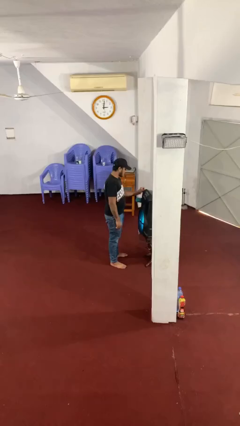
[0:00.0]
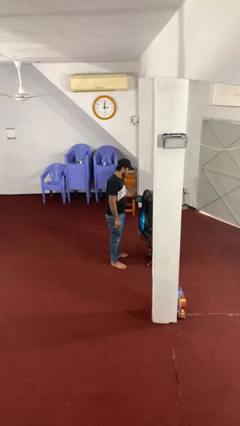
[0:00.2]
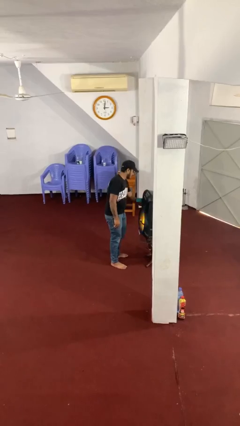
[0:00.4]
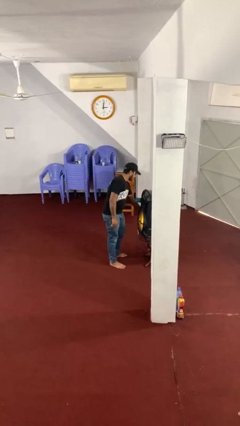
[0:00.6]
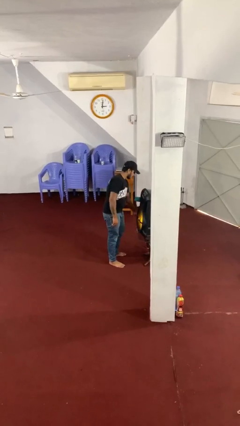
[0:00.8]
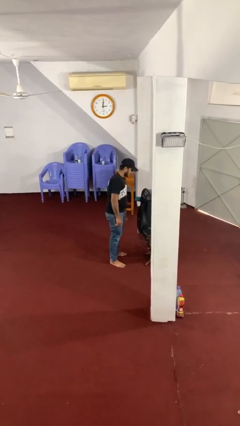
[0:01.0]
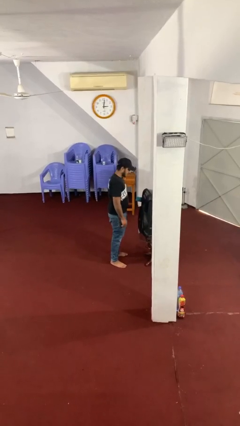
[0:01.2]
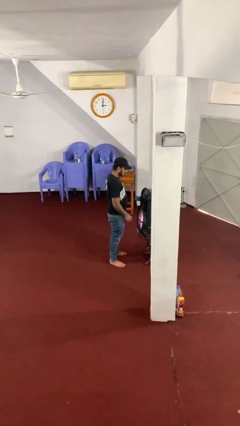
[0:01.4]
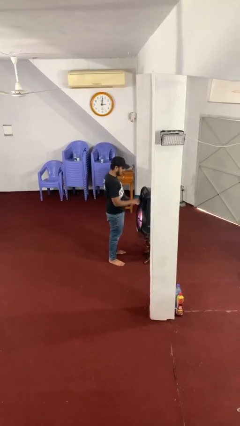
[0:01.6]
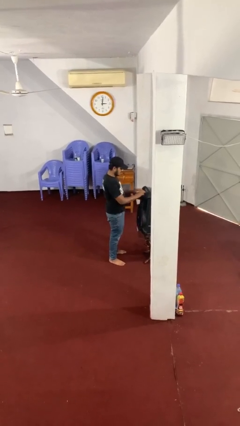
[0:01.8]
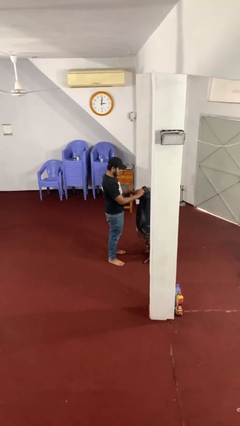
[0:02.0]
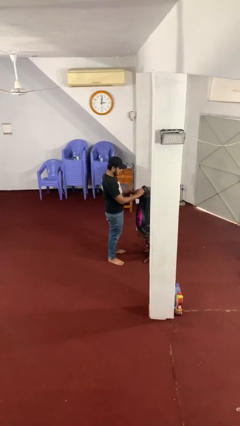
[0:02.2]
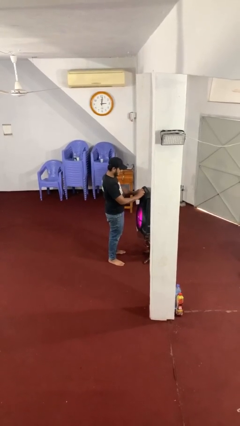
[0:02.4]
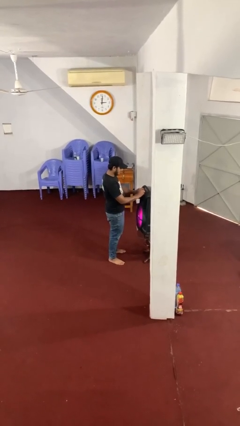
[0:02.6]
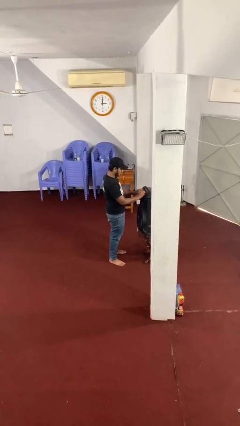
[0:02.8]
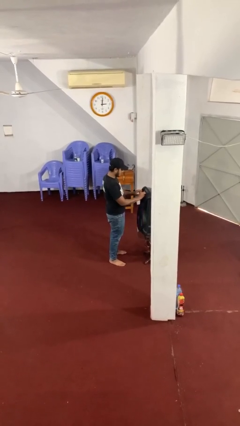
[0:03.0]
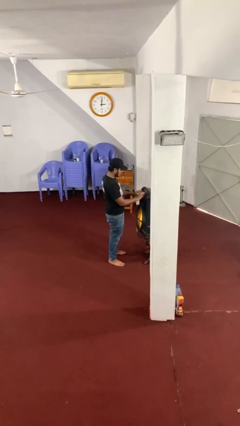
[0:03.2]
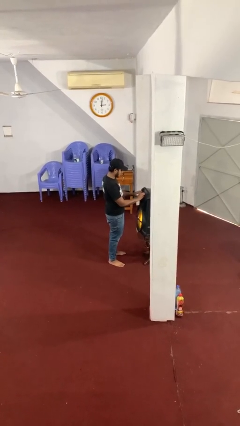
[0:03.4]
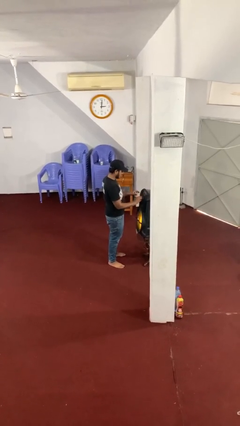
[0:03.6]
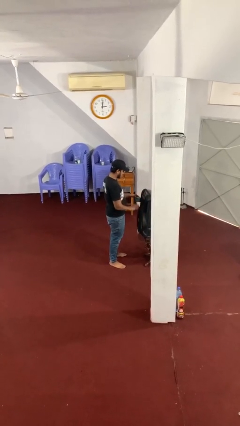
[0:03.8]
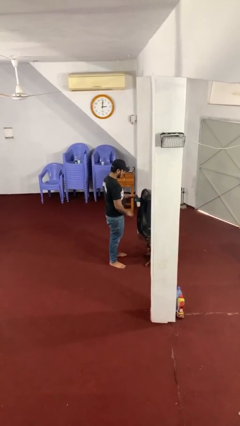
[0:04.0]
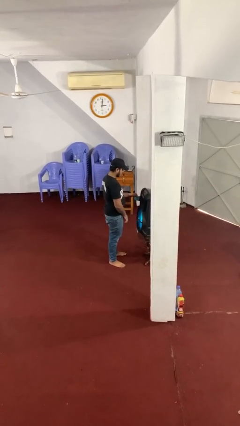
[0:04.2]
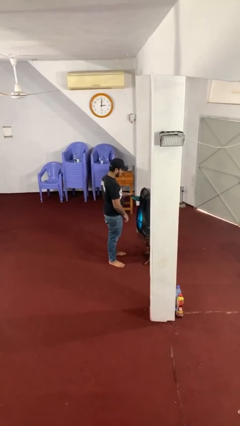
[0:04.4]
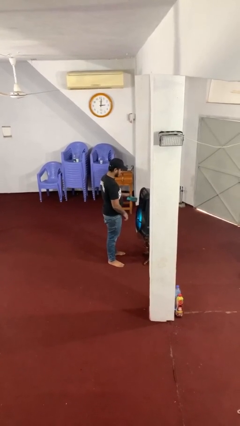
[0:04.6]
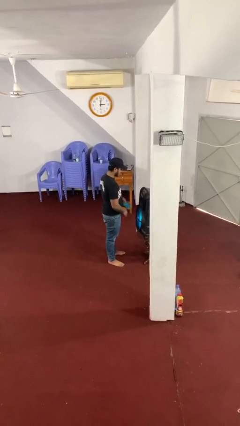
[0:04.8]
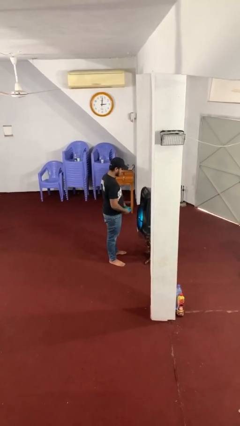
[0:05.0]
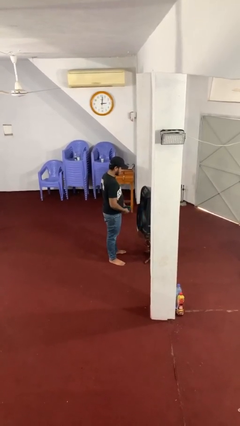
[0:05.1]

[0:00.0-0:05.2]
person purchases from machine

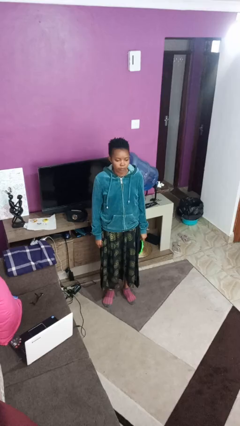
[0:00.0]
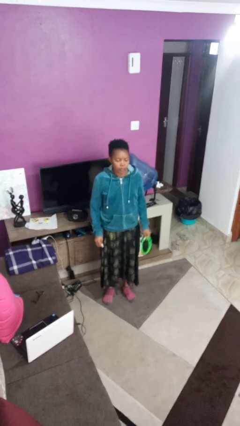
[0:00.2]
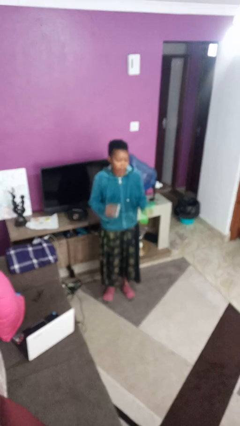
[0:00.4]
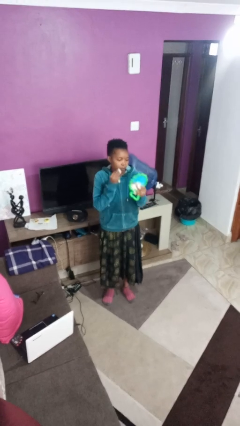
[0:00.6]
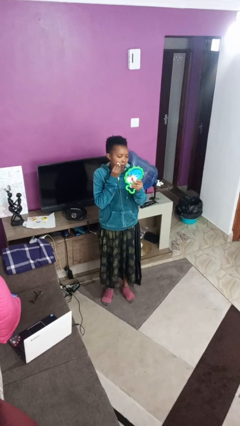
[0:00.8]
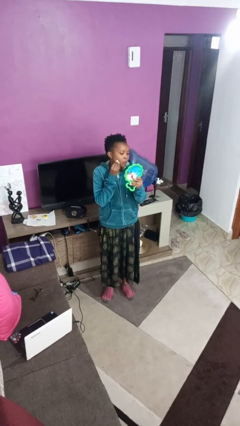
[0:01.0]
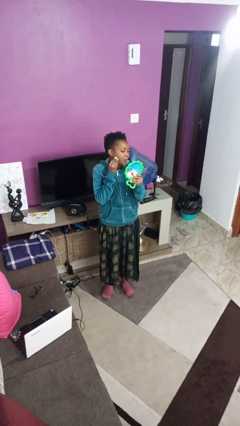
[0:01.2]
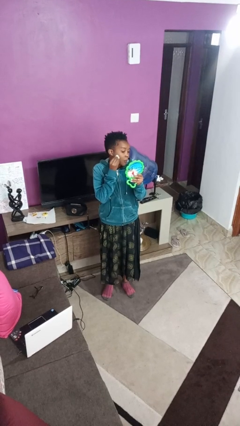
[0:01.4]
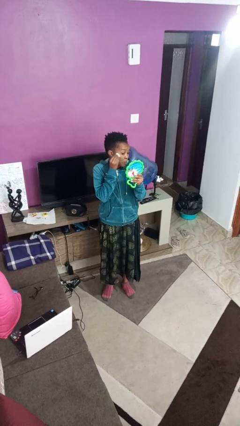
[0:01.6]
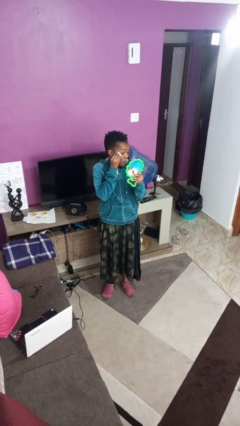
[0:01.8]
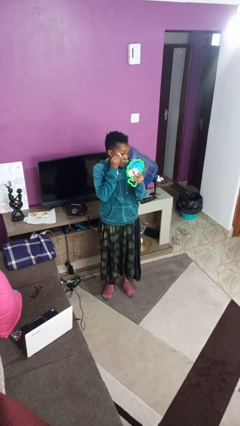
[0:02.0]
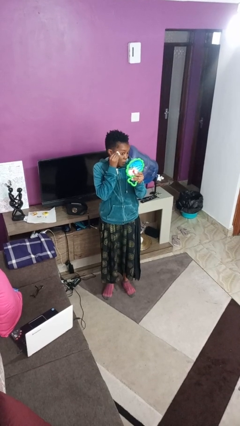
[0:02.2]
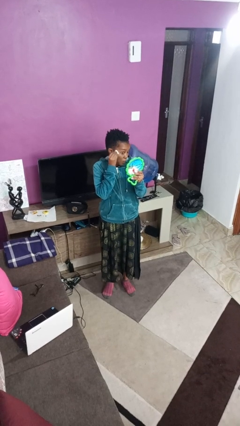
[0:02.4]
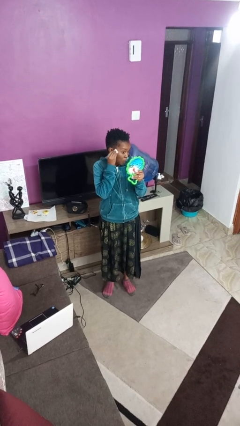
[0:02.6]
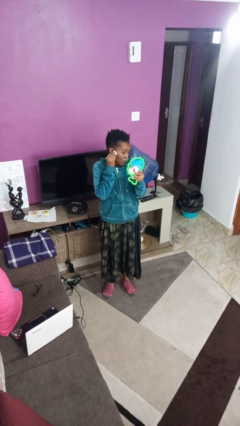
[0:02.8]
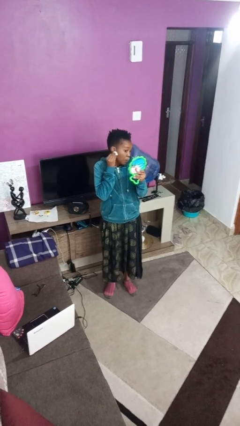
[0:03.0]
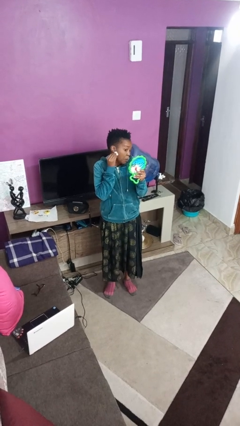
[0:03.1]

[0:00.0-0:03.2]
person applies foundation makeup

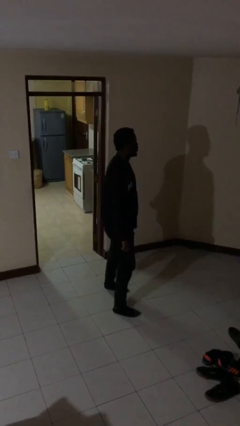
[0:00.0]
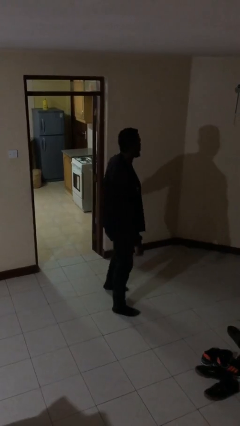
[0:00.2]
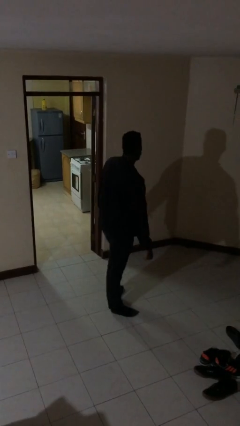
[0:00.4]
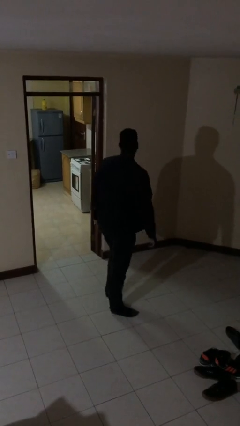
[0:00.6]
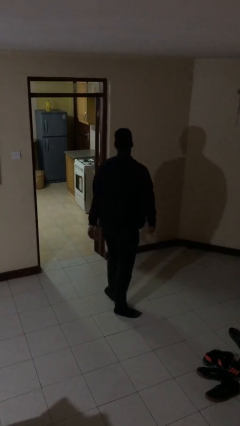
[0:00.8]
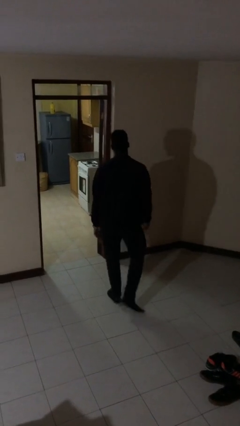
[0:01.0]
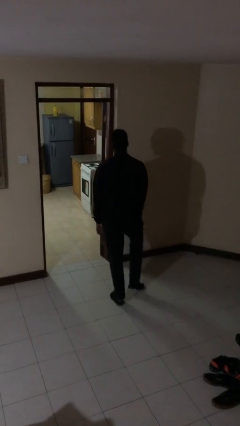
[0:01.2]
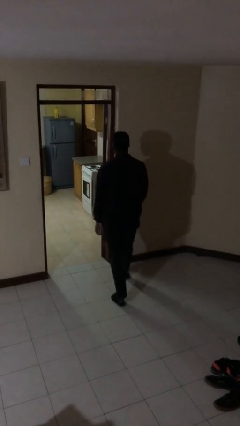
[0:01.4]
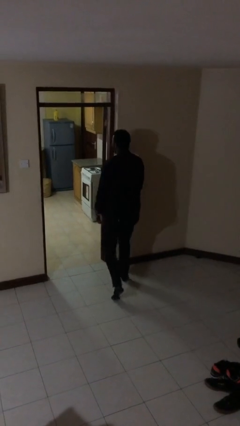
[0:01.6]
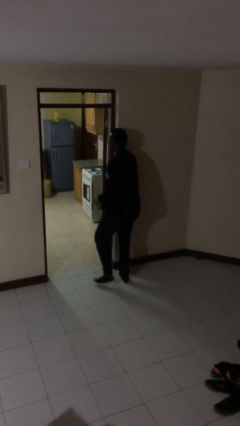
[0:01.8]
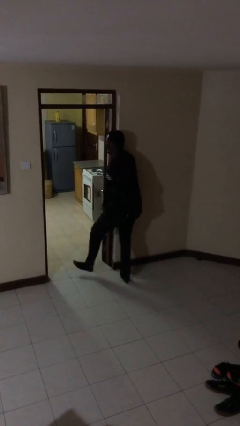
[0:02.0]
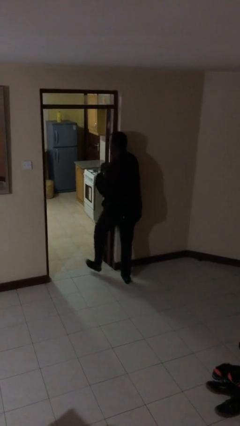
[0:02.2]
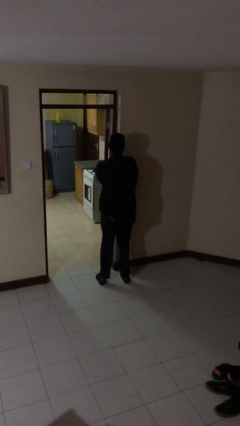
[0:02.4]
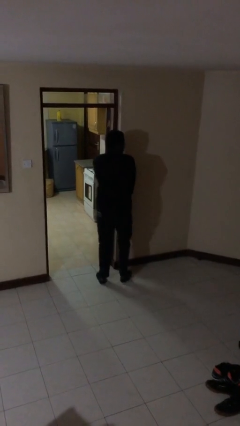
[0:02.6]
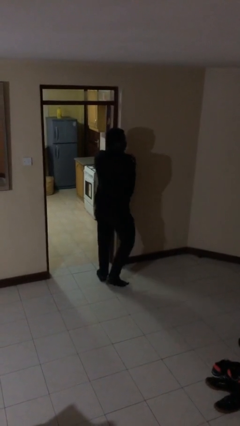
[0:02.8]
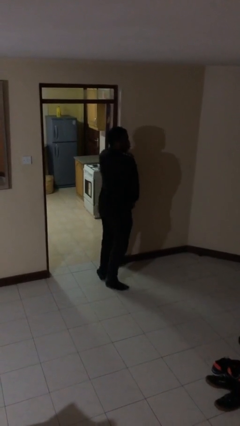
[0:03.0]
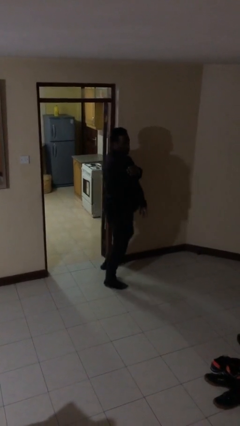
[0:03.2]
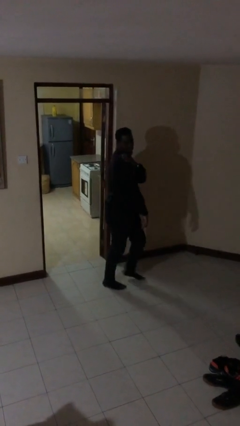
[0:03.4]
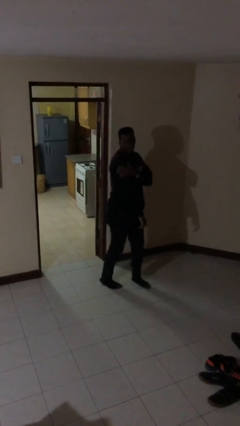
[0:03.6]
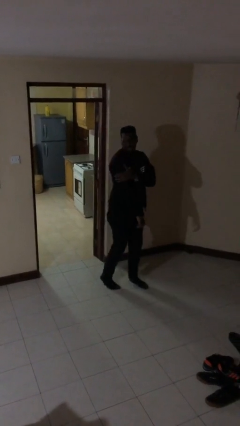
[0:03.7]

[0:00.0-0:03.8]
person bumps into wall

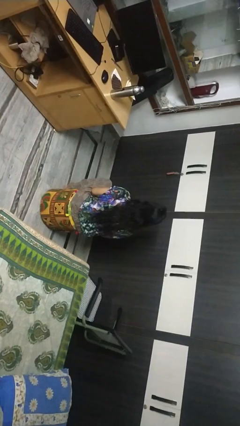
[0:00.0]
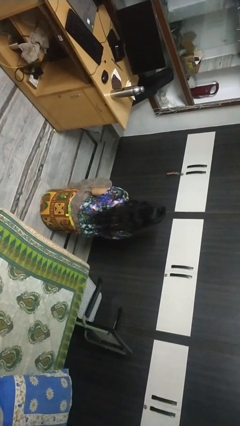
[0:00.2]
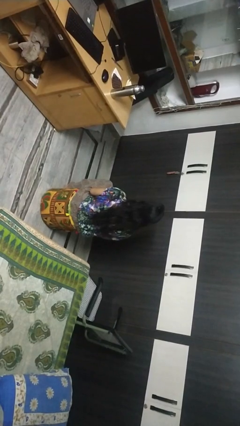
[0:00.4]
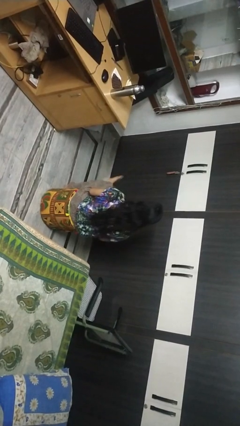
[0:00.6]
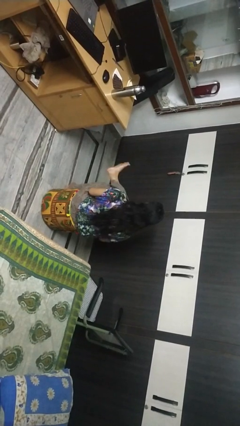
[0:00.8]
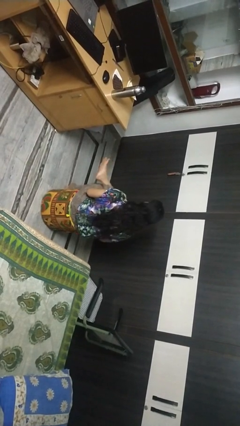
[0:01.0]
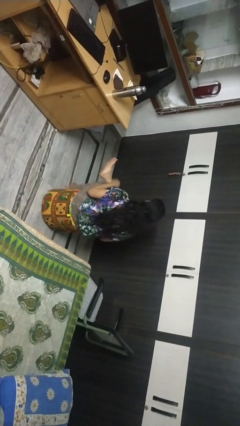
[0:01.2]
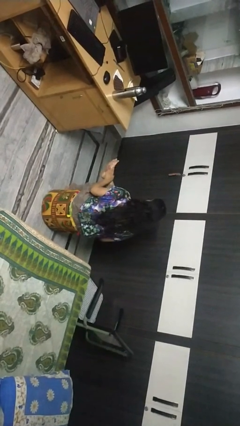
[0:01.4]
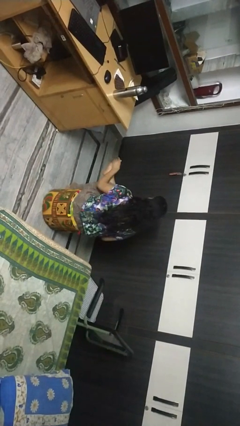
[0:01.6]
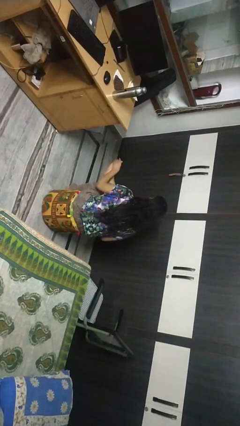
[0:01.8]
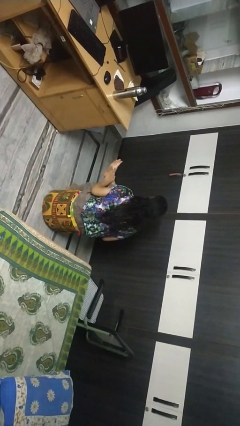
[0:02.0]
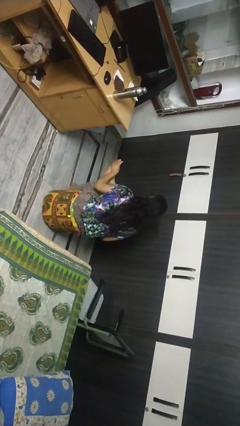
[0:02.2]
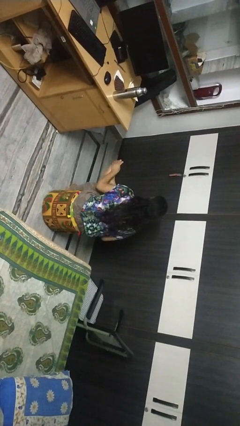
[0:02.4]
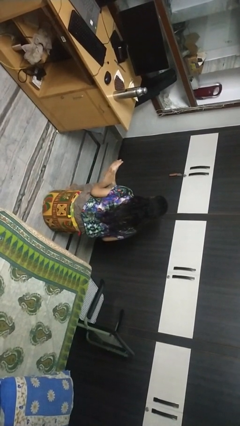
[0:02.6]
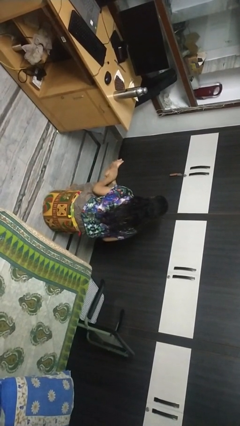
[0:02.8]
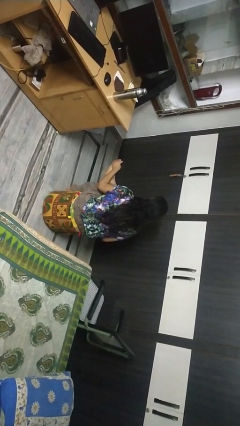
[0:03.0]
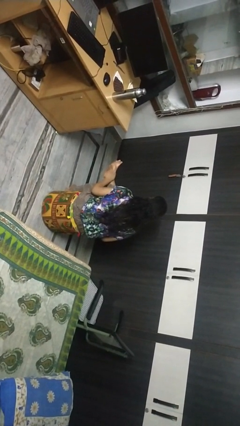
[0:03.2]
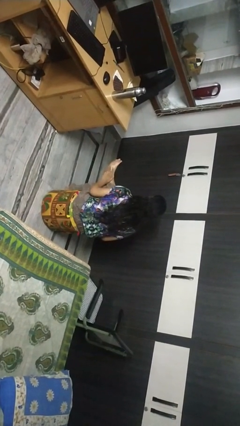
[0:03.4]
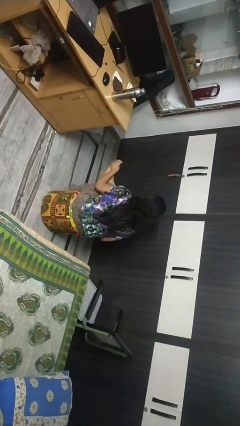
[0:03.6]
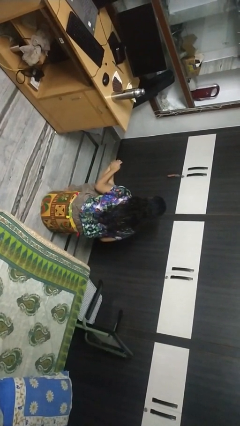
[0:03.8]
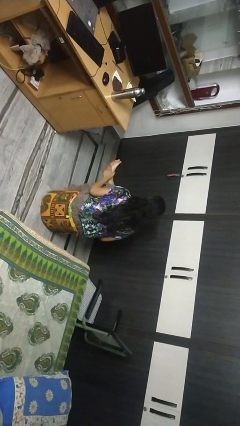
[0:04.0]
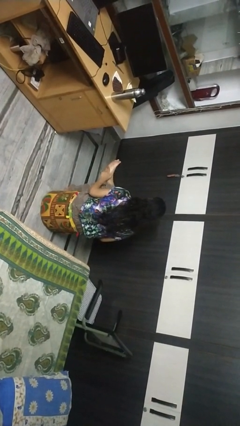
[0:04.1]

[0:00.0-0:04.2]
person rubs foot

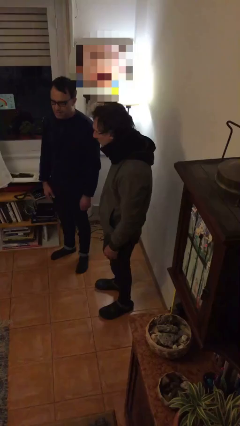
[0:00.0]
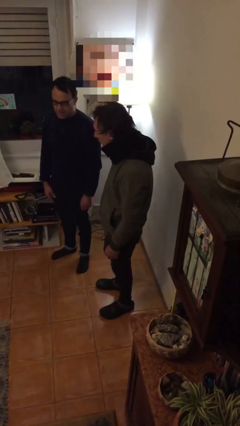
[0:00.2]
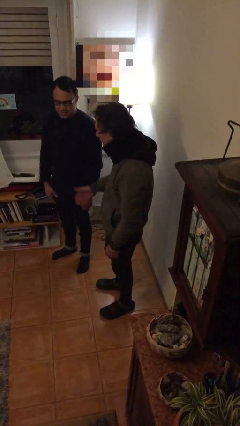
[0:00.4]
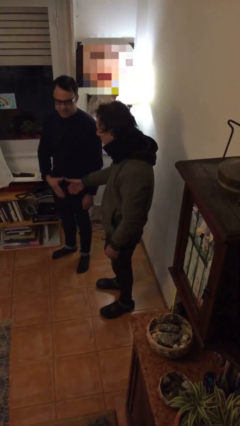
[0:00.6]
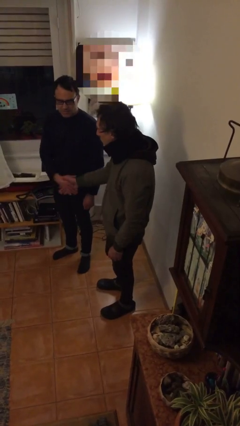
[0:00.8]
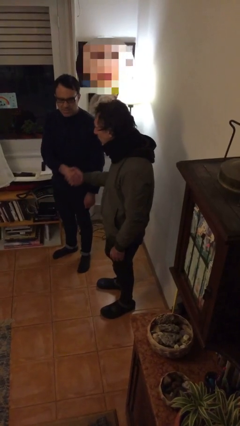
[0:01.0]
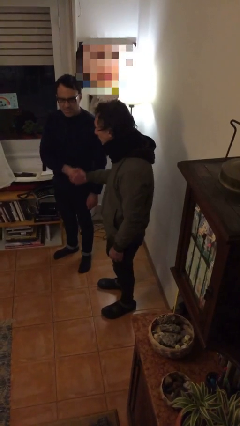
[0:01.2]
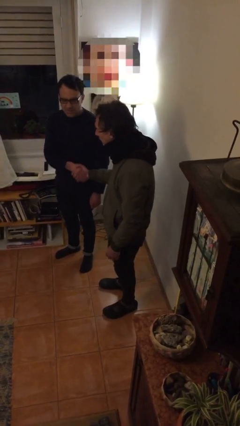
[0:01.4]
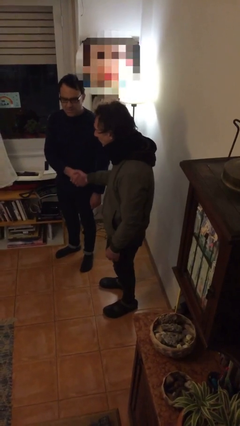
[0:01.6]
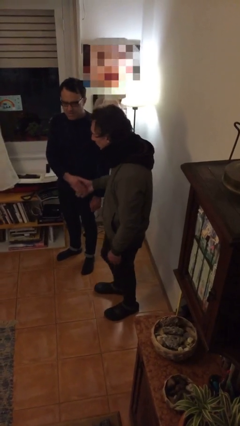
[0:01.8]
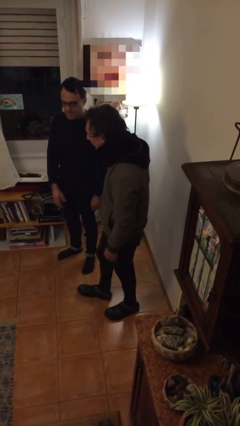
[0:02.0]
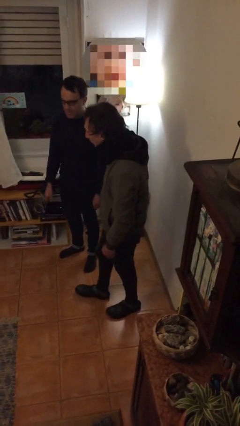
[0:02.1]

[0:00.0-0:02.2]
person shakes hand
